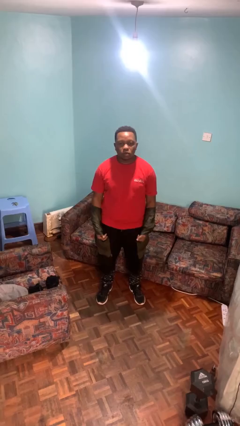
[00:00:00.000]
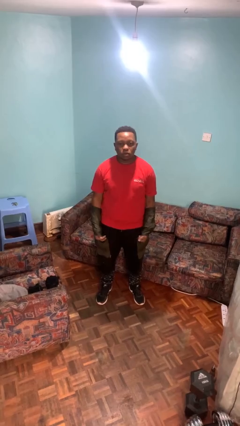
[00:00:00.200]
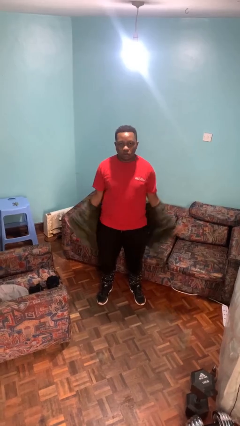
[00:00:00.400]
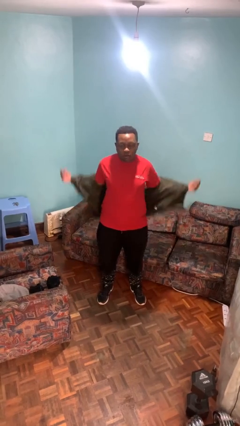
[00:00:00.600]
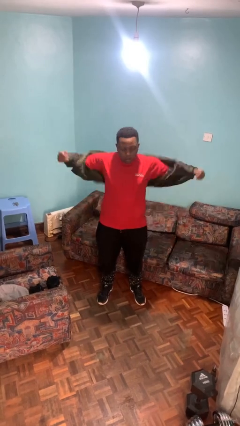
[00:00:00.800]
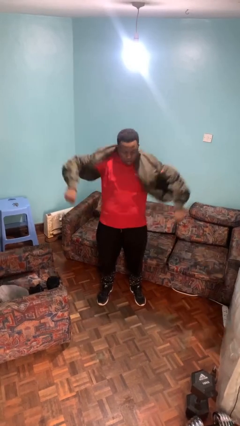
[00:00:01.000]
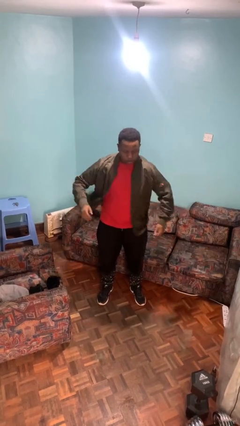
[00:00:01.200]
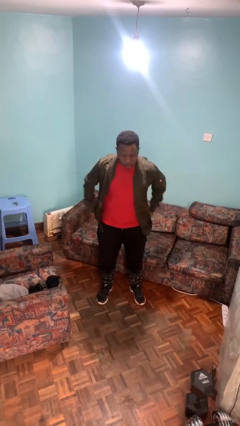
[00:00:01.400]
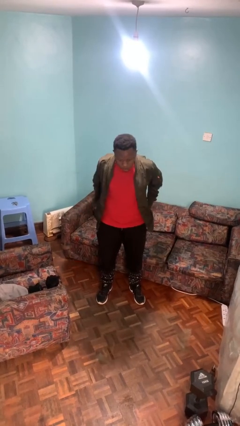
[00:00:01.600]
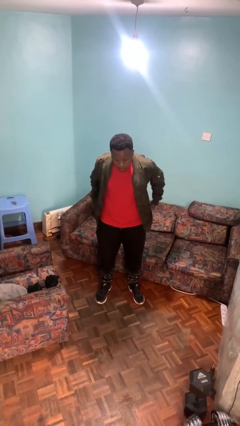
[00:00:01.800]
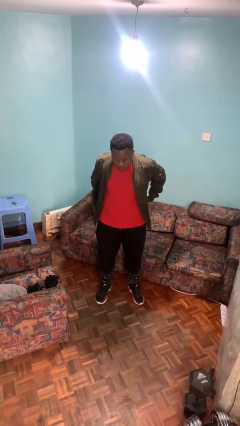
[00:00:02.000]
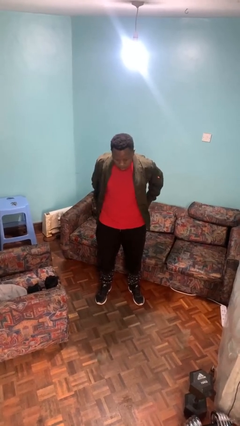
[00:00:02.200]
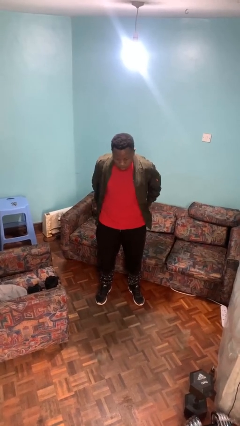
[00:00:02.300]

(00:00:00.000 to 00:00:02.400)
person puts on jacket

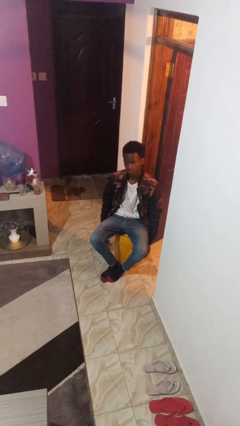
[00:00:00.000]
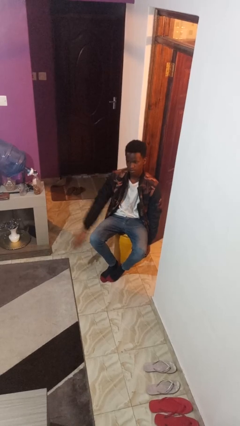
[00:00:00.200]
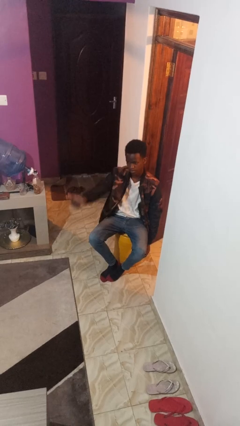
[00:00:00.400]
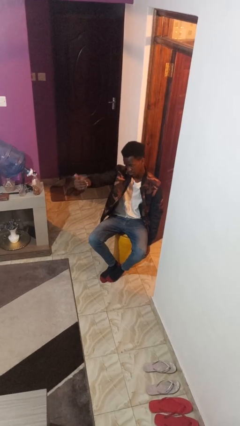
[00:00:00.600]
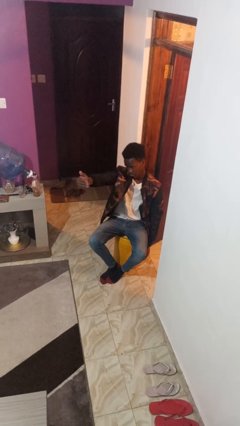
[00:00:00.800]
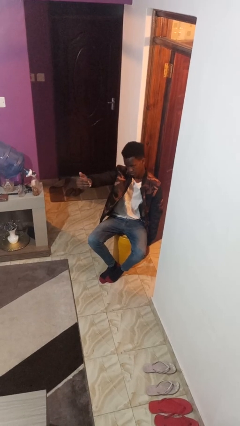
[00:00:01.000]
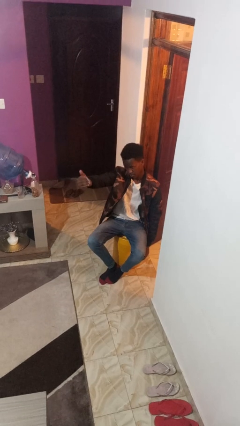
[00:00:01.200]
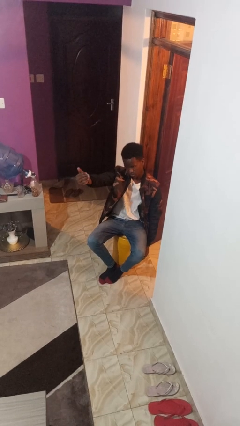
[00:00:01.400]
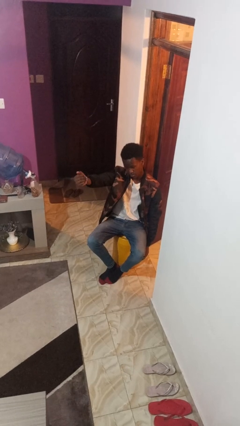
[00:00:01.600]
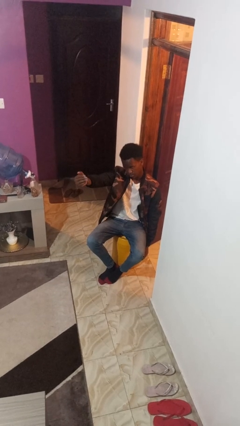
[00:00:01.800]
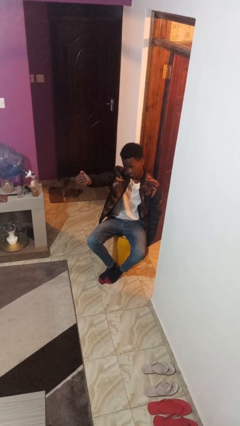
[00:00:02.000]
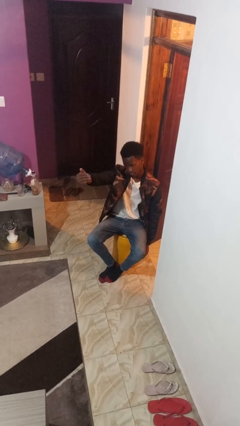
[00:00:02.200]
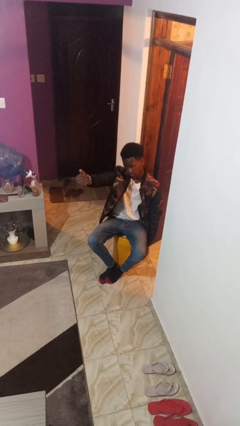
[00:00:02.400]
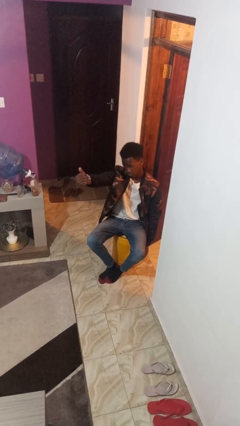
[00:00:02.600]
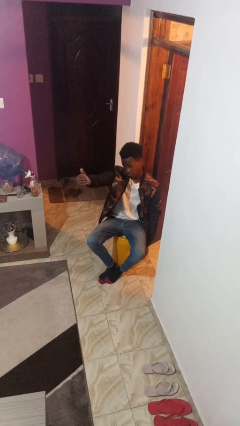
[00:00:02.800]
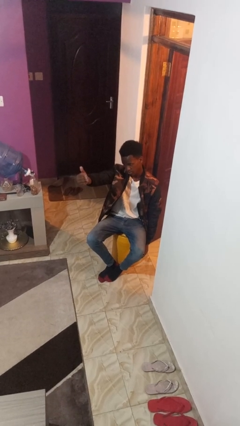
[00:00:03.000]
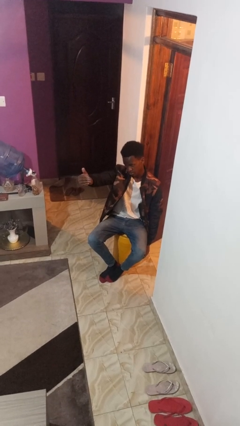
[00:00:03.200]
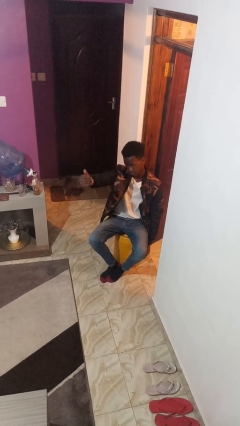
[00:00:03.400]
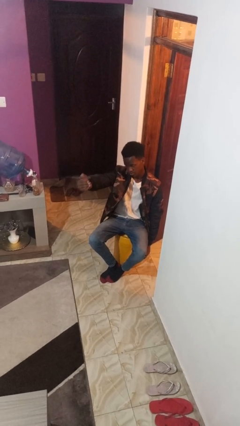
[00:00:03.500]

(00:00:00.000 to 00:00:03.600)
person gestures come here

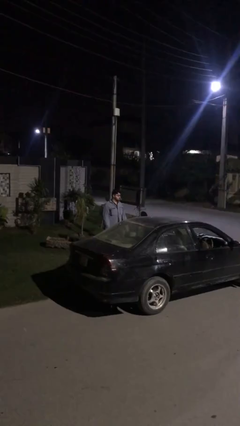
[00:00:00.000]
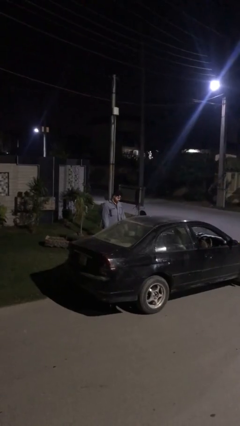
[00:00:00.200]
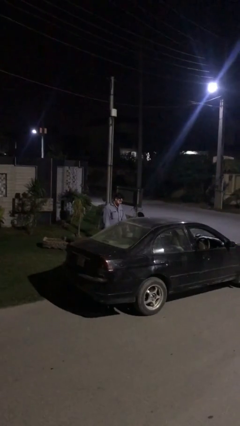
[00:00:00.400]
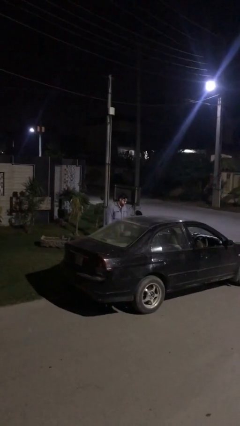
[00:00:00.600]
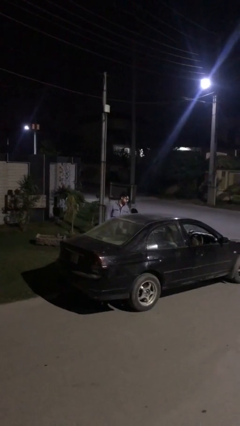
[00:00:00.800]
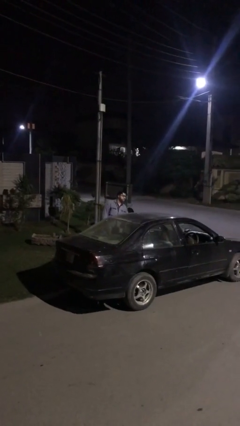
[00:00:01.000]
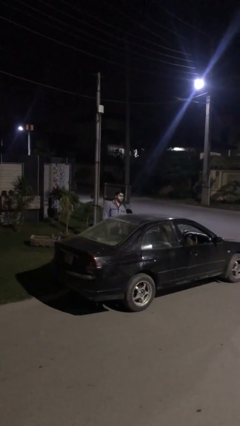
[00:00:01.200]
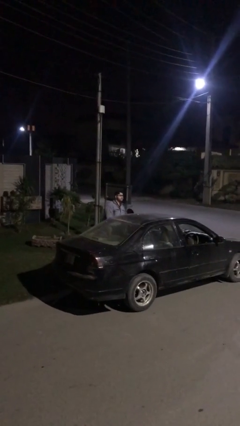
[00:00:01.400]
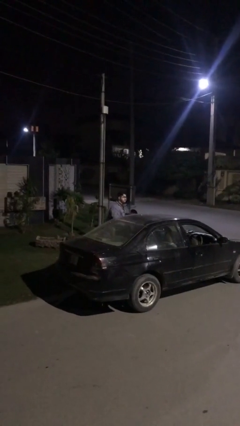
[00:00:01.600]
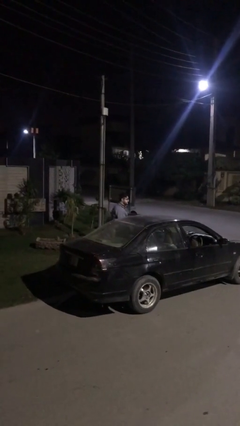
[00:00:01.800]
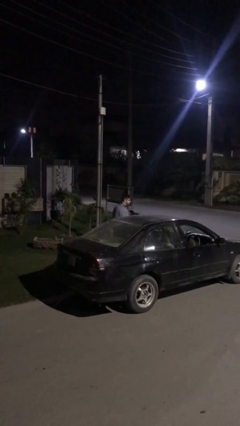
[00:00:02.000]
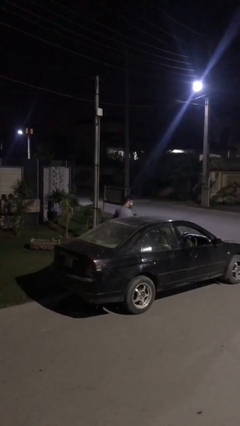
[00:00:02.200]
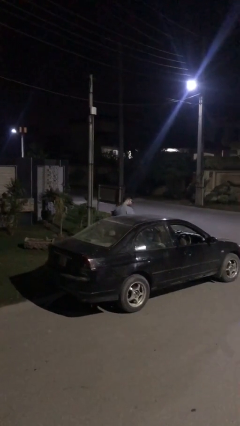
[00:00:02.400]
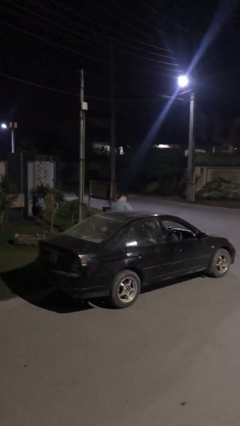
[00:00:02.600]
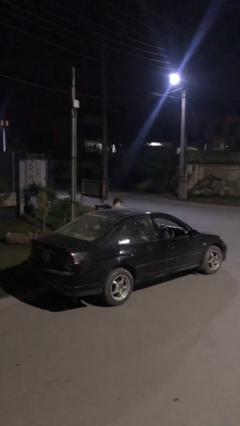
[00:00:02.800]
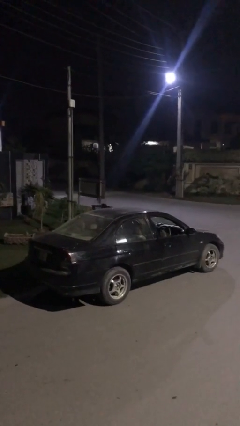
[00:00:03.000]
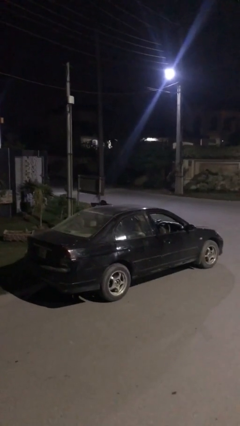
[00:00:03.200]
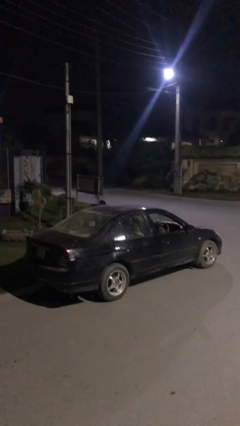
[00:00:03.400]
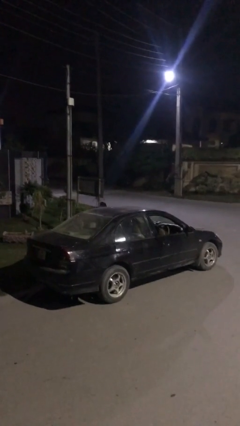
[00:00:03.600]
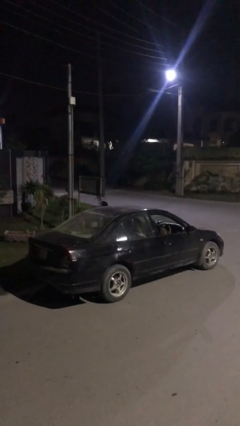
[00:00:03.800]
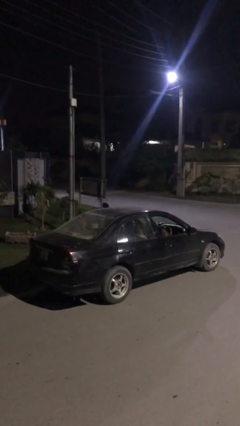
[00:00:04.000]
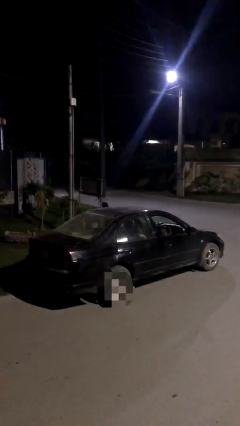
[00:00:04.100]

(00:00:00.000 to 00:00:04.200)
car picks up person

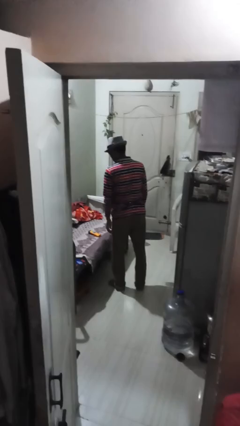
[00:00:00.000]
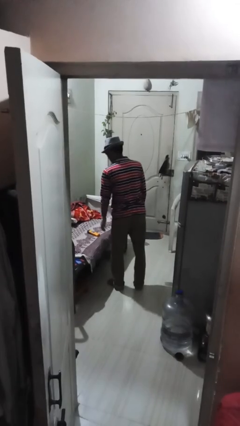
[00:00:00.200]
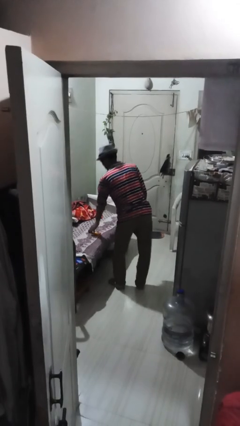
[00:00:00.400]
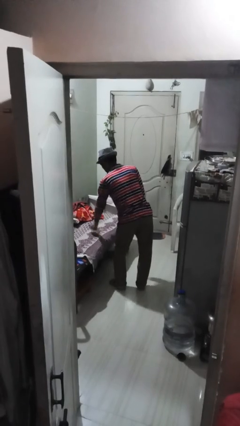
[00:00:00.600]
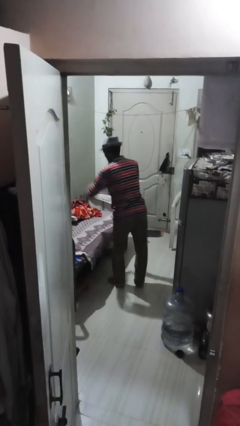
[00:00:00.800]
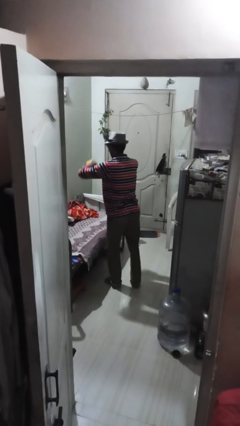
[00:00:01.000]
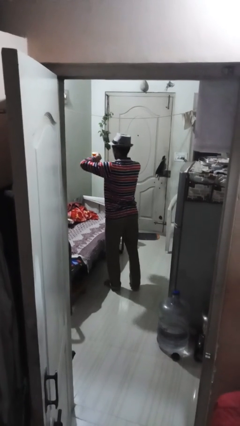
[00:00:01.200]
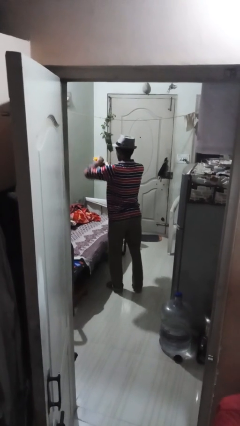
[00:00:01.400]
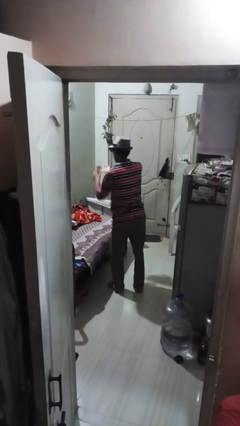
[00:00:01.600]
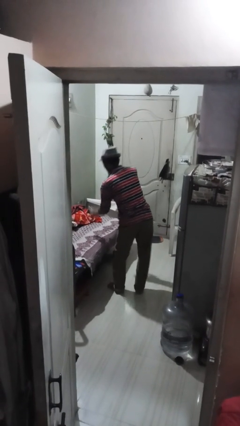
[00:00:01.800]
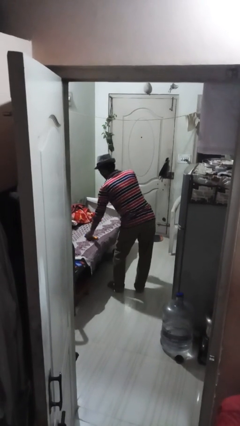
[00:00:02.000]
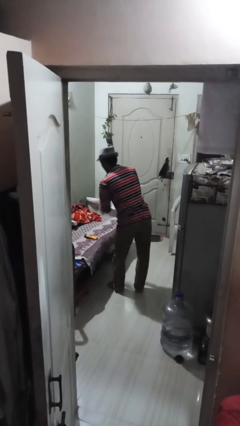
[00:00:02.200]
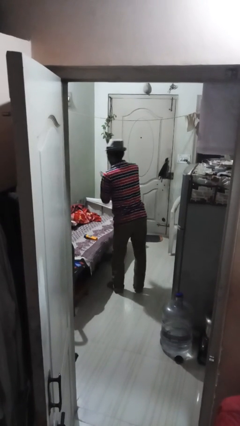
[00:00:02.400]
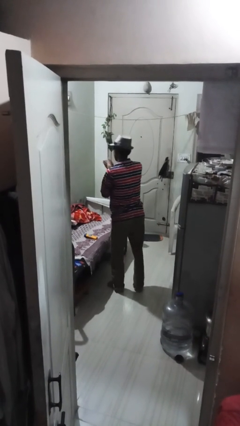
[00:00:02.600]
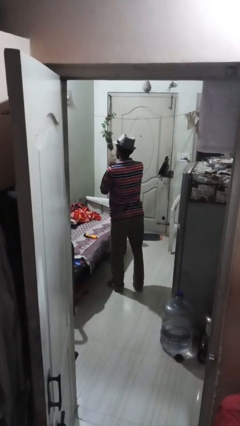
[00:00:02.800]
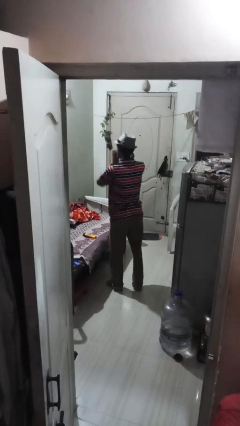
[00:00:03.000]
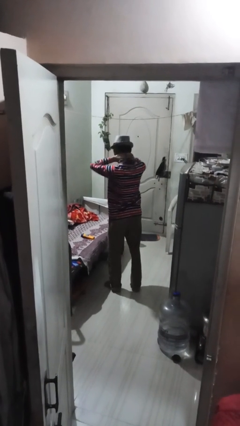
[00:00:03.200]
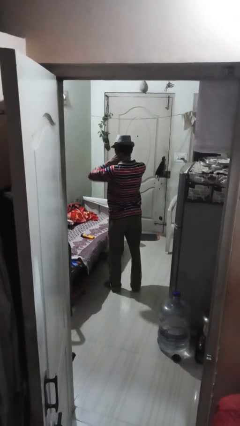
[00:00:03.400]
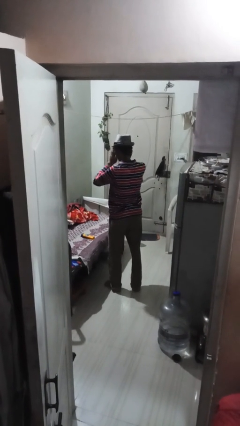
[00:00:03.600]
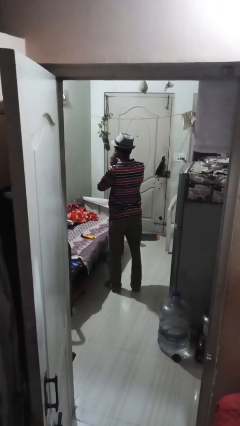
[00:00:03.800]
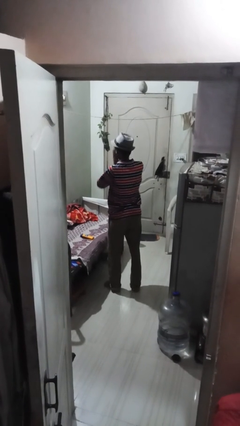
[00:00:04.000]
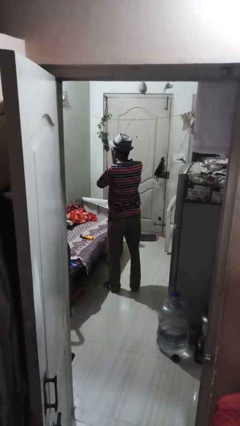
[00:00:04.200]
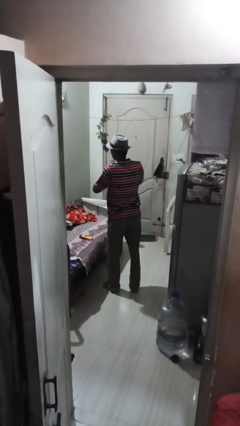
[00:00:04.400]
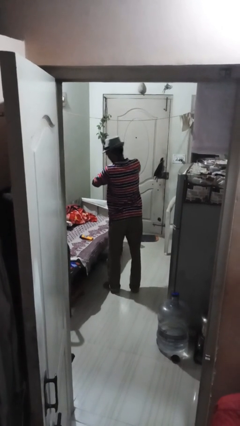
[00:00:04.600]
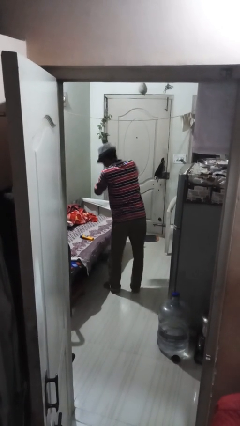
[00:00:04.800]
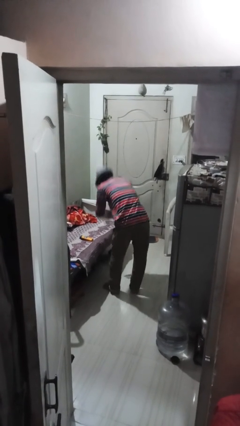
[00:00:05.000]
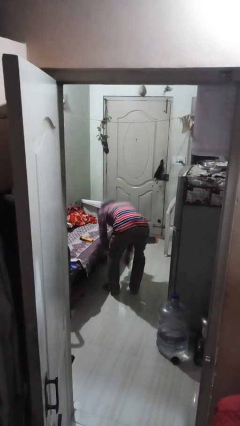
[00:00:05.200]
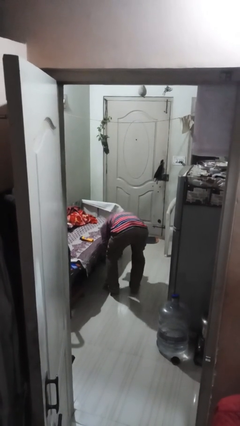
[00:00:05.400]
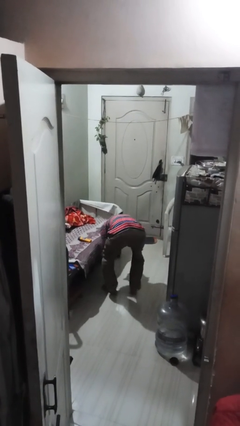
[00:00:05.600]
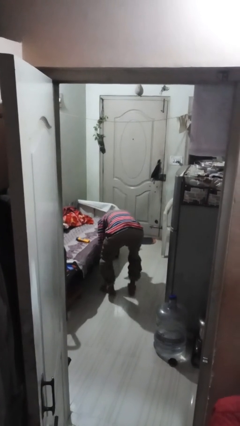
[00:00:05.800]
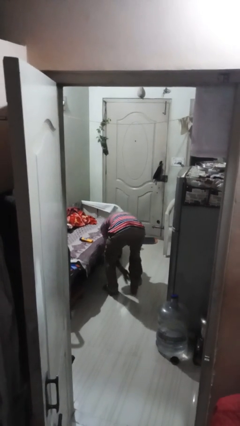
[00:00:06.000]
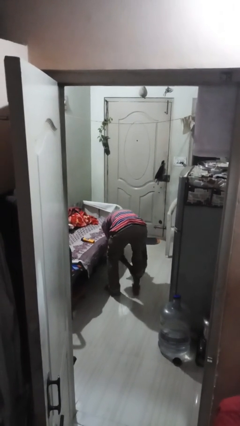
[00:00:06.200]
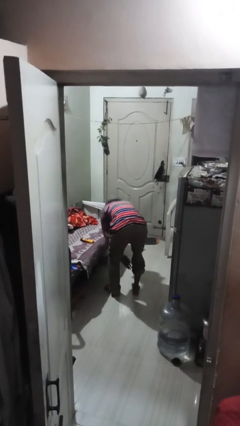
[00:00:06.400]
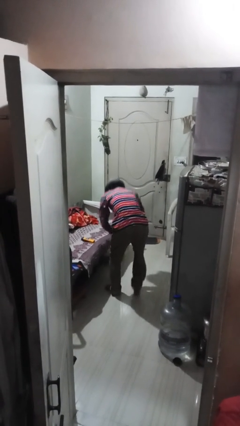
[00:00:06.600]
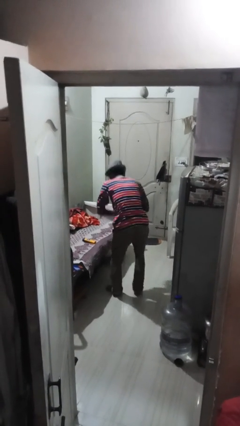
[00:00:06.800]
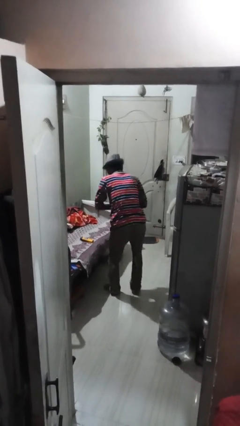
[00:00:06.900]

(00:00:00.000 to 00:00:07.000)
person applies sunscreen

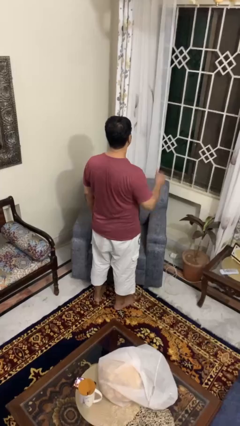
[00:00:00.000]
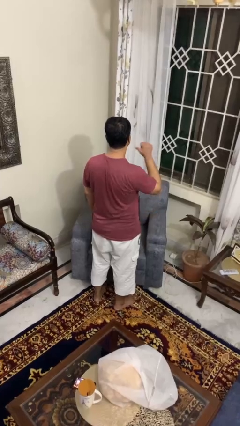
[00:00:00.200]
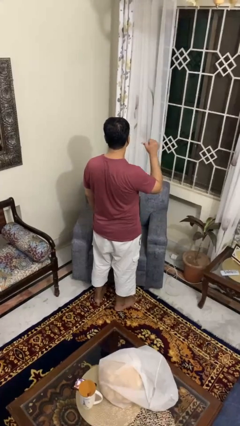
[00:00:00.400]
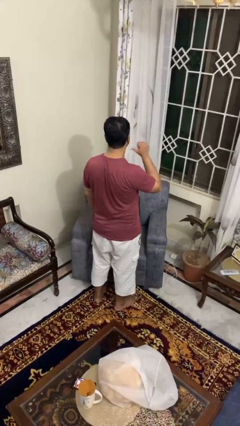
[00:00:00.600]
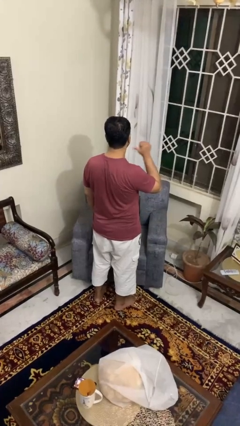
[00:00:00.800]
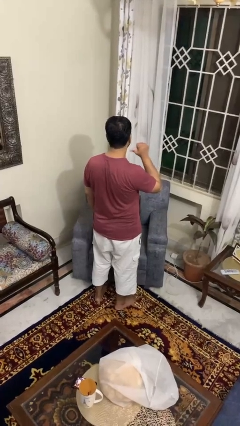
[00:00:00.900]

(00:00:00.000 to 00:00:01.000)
person gestures behind me
